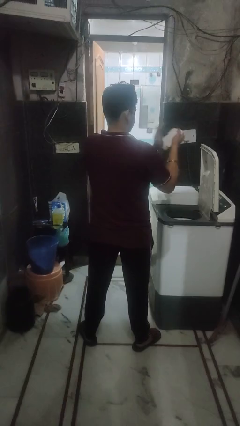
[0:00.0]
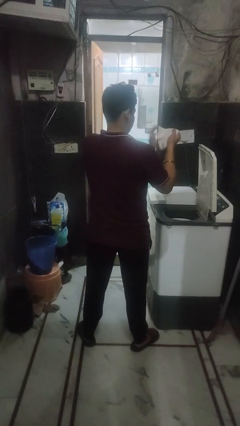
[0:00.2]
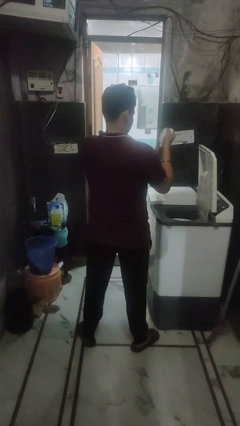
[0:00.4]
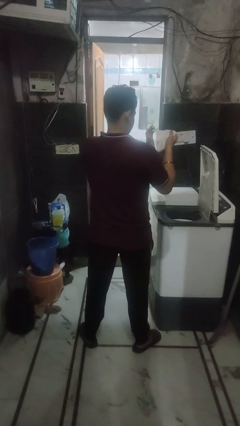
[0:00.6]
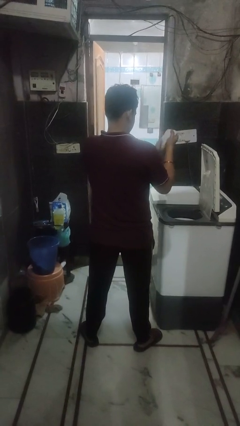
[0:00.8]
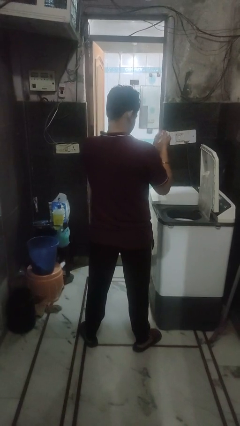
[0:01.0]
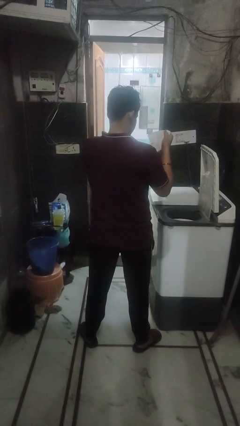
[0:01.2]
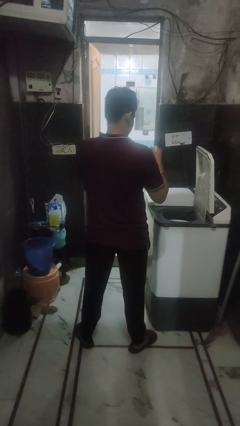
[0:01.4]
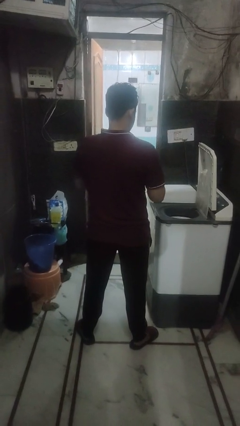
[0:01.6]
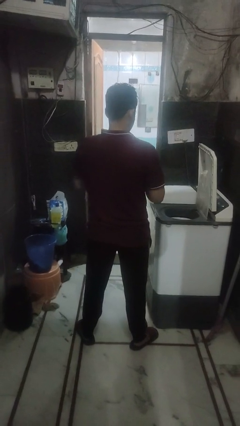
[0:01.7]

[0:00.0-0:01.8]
person cleans dryer lint trap

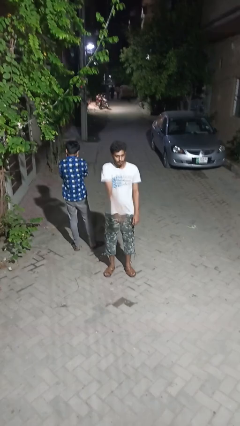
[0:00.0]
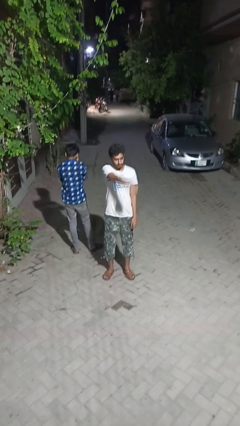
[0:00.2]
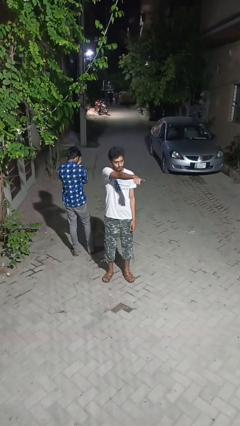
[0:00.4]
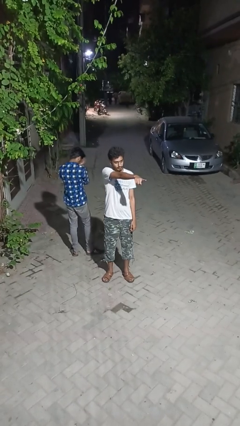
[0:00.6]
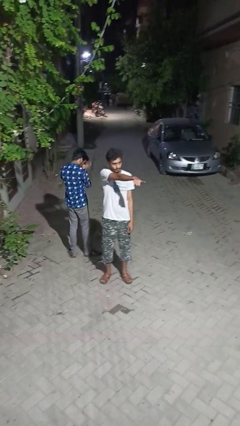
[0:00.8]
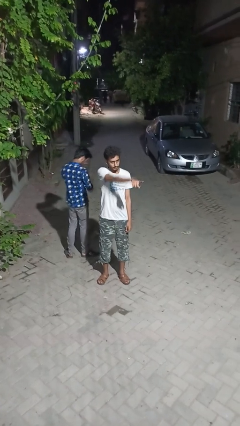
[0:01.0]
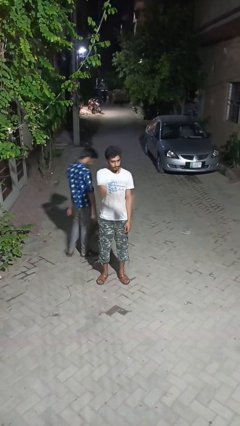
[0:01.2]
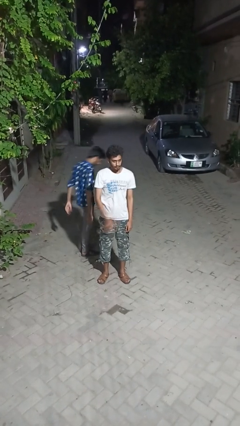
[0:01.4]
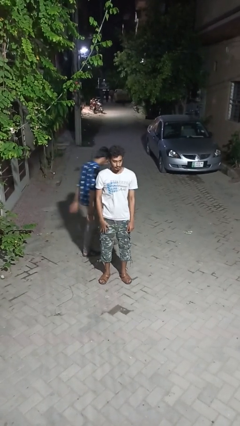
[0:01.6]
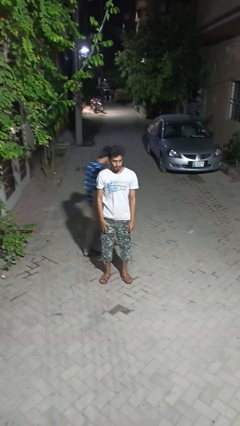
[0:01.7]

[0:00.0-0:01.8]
person points at person

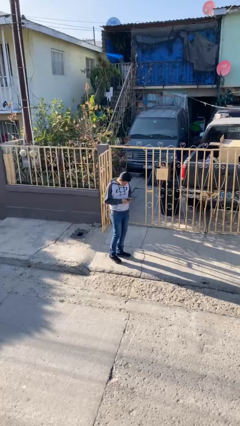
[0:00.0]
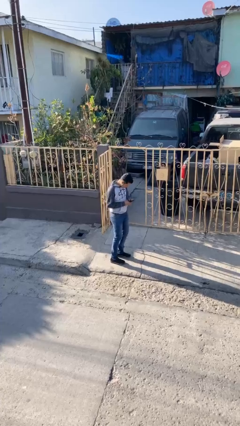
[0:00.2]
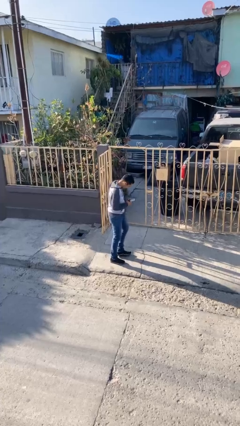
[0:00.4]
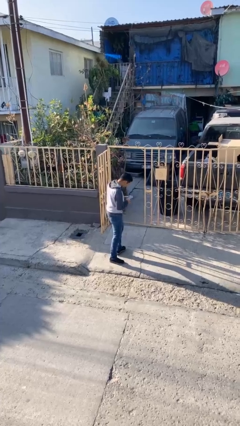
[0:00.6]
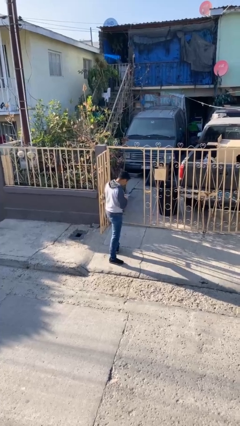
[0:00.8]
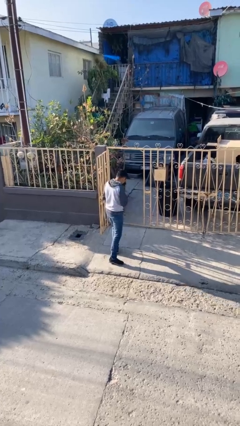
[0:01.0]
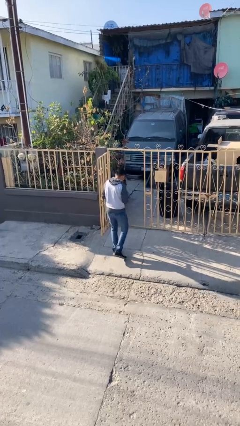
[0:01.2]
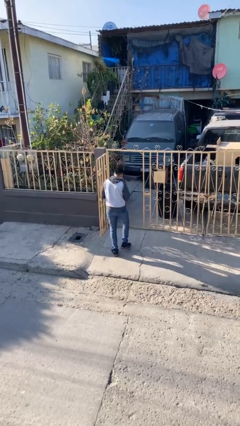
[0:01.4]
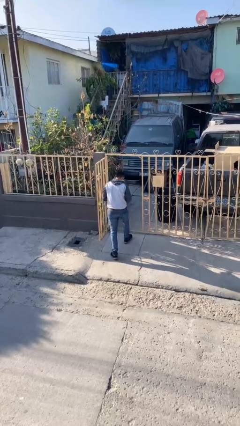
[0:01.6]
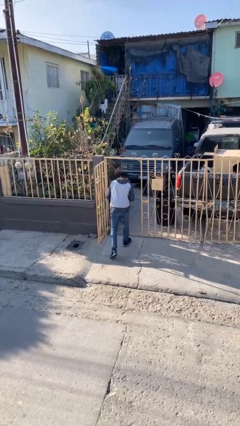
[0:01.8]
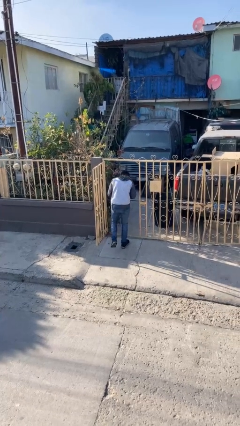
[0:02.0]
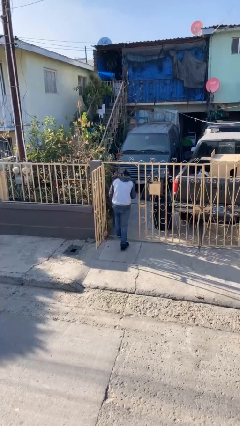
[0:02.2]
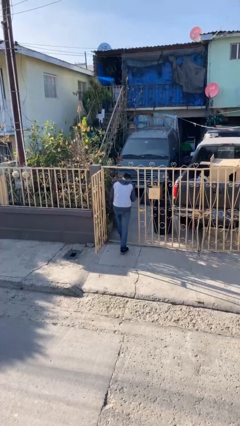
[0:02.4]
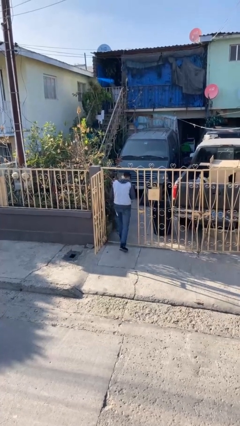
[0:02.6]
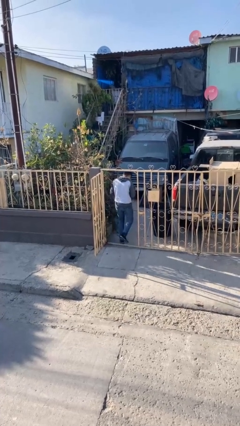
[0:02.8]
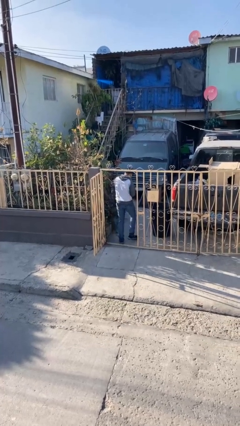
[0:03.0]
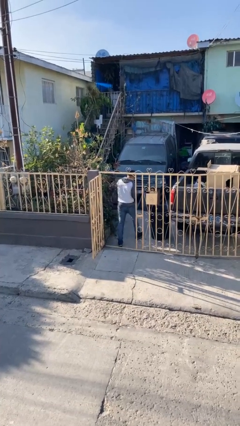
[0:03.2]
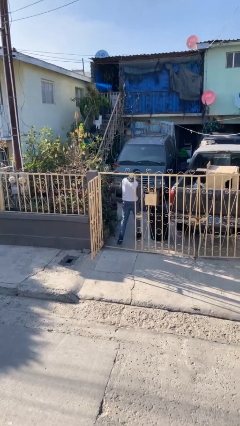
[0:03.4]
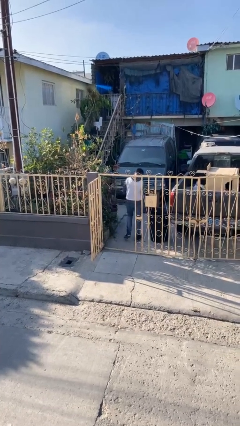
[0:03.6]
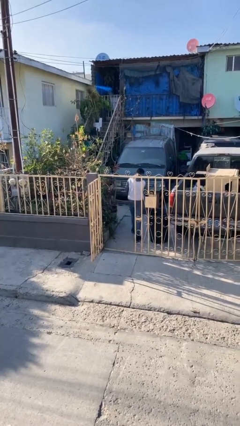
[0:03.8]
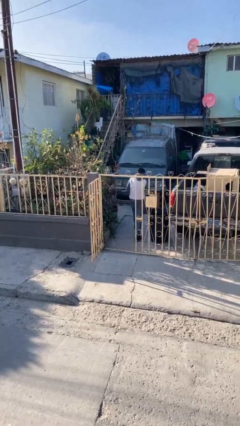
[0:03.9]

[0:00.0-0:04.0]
person exits scene through structure

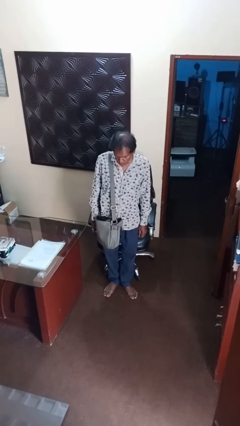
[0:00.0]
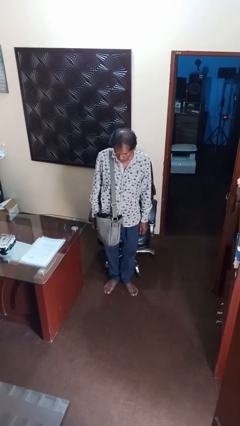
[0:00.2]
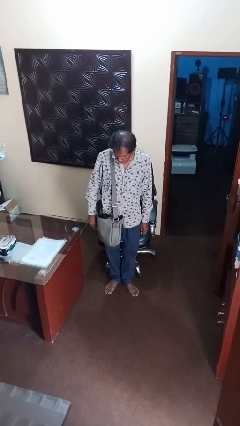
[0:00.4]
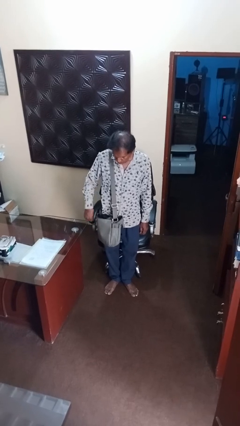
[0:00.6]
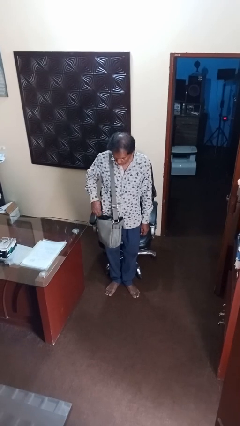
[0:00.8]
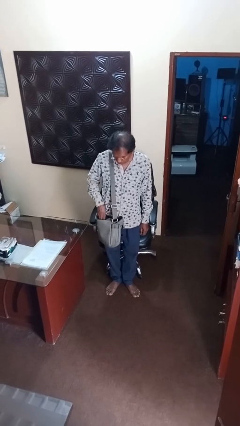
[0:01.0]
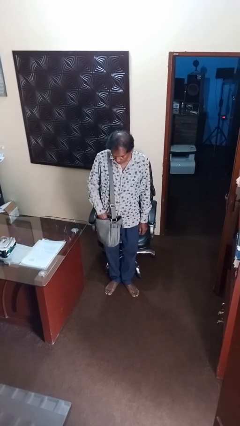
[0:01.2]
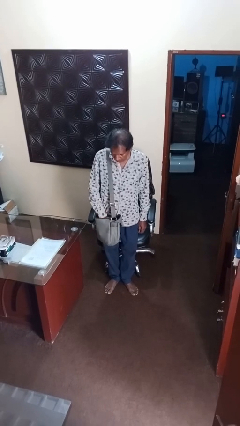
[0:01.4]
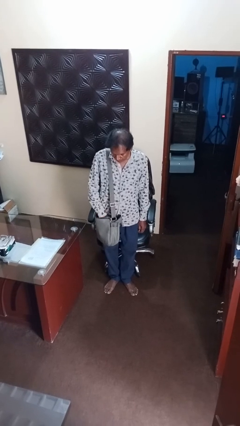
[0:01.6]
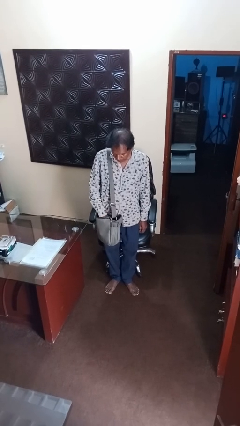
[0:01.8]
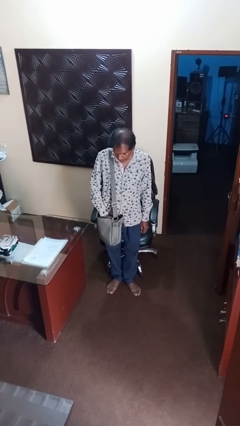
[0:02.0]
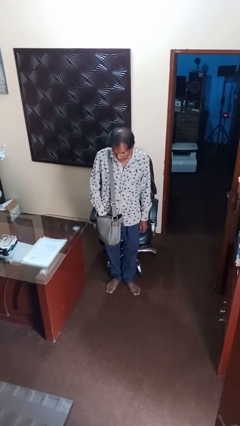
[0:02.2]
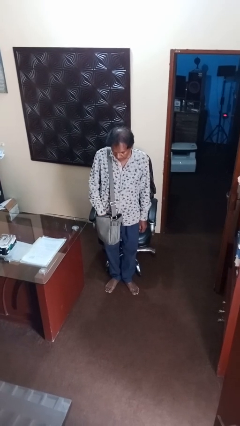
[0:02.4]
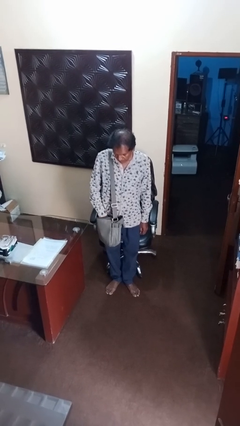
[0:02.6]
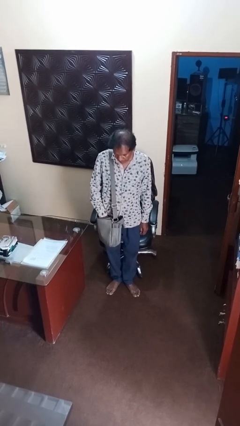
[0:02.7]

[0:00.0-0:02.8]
person searches in backpack

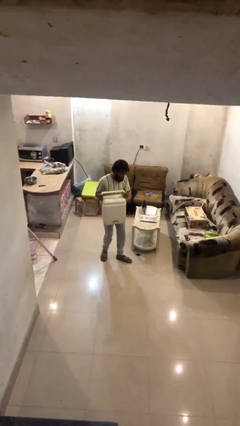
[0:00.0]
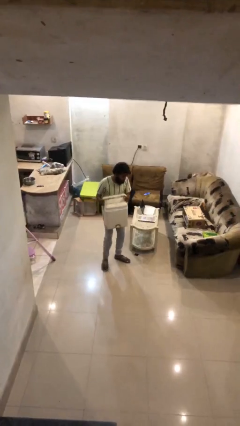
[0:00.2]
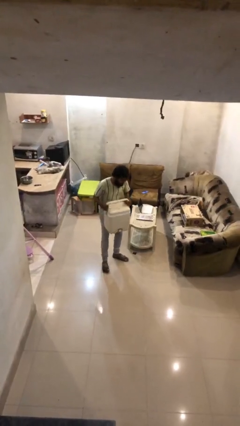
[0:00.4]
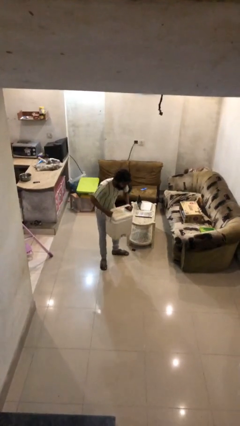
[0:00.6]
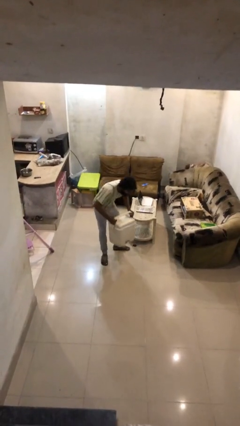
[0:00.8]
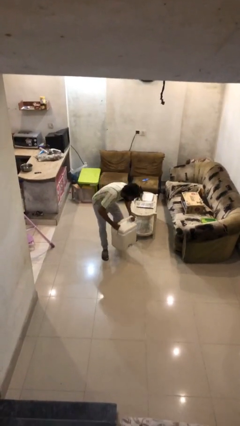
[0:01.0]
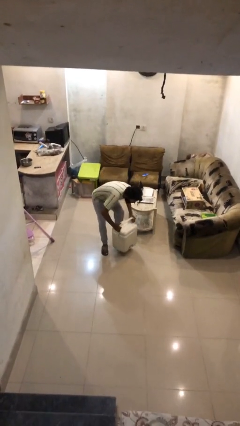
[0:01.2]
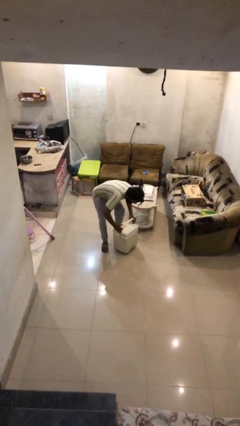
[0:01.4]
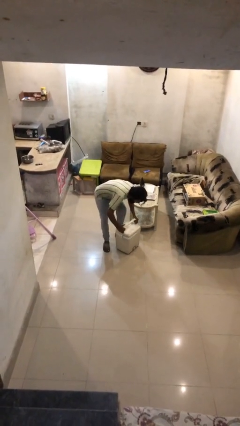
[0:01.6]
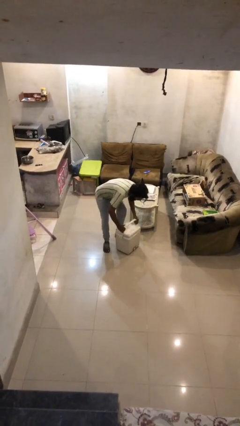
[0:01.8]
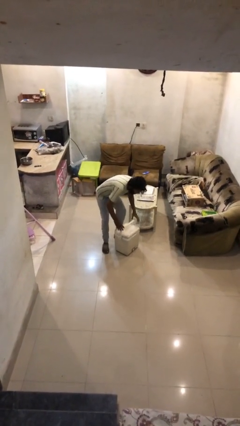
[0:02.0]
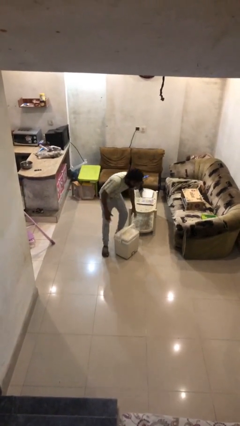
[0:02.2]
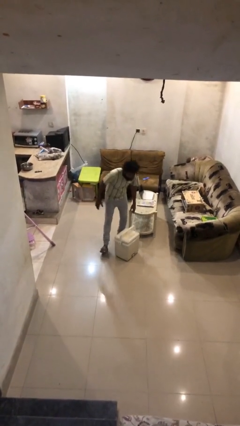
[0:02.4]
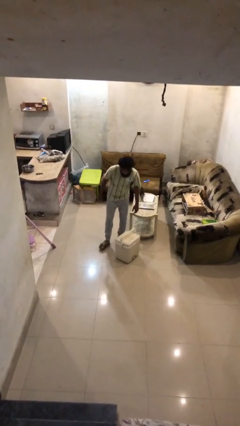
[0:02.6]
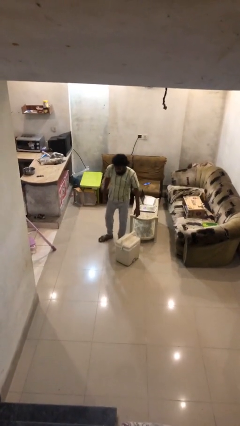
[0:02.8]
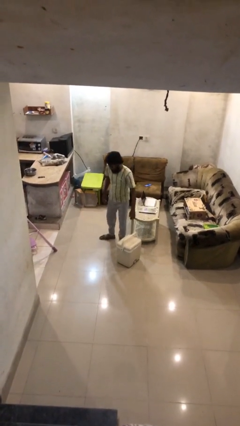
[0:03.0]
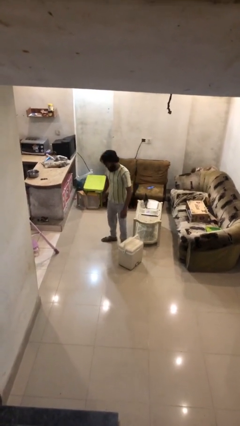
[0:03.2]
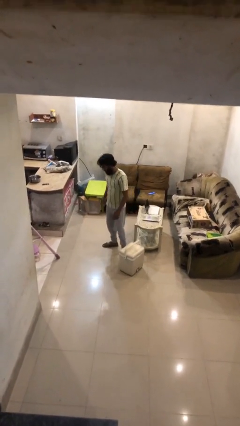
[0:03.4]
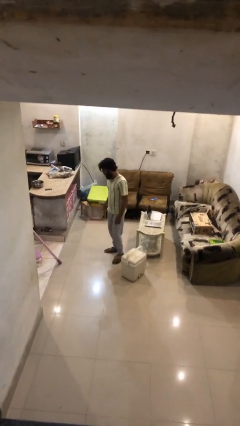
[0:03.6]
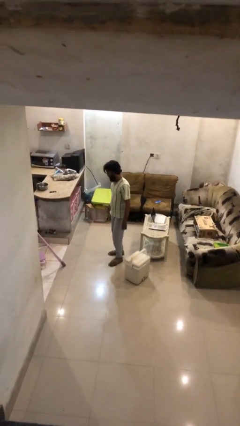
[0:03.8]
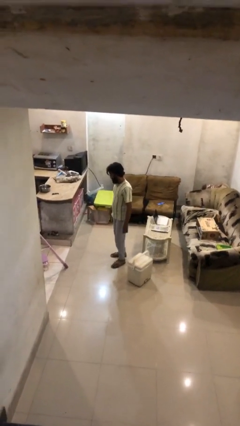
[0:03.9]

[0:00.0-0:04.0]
person puts down object on floor

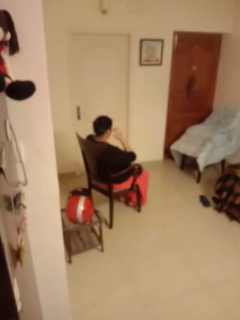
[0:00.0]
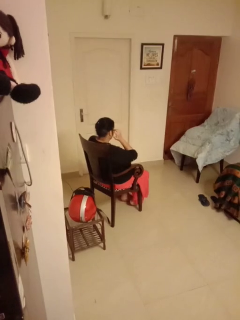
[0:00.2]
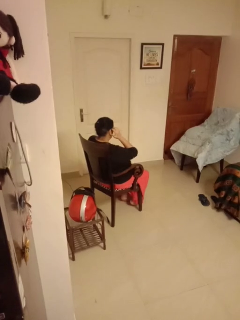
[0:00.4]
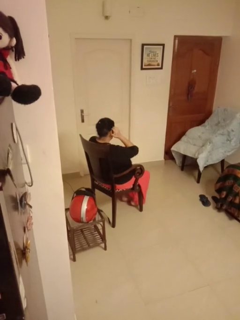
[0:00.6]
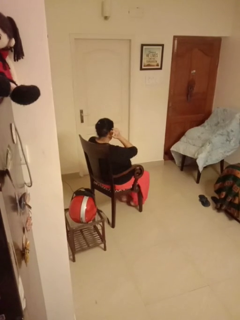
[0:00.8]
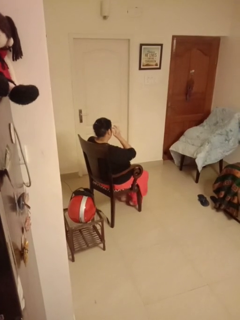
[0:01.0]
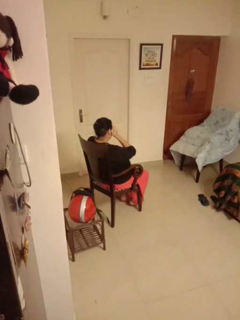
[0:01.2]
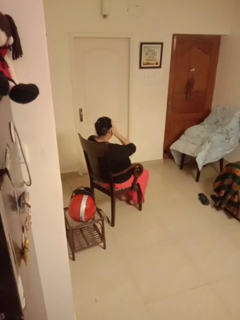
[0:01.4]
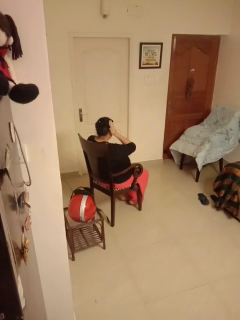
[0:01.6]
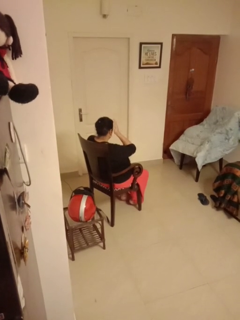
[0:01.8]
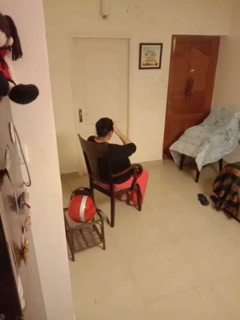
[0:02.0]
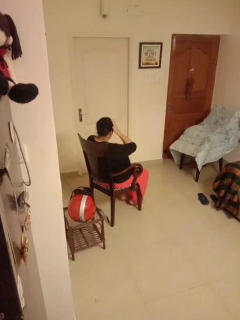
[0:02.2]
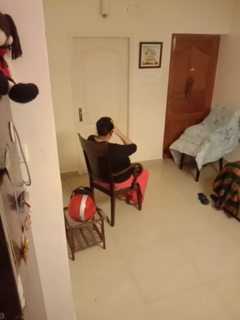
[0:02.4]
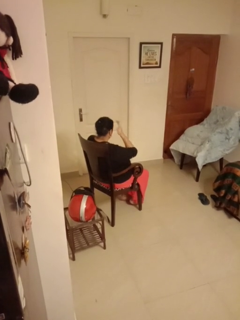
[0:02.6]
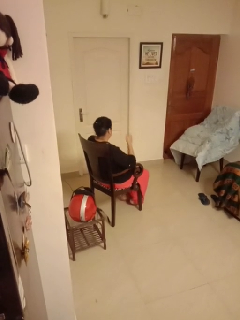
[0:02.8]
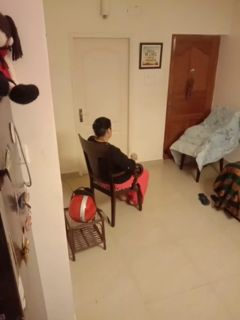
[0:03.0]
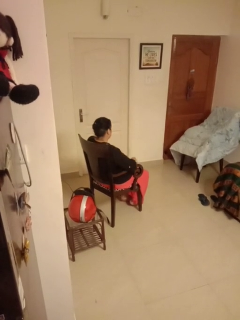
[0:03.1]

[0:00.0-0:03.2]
person strokes hair

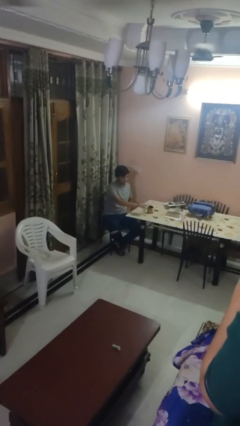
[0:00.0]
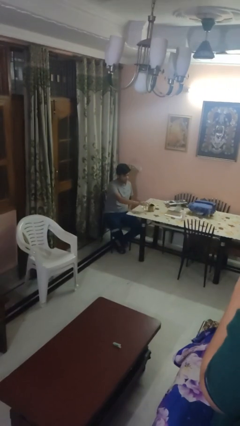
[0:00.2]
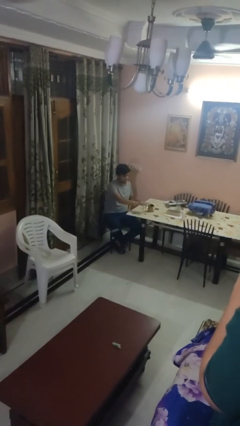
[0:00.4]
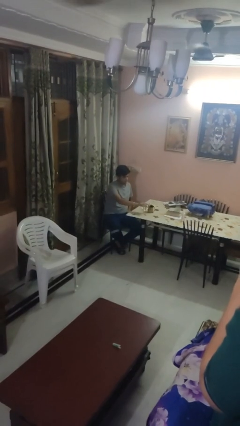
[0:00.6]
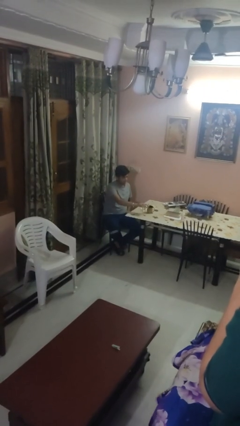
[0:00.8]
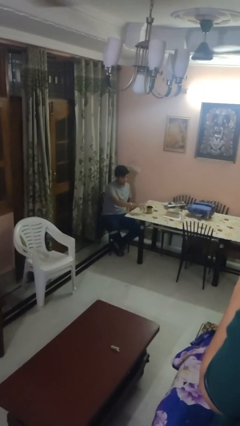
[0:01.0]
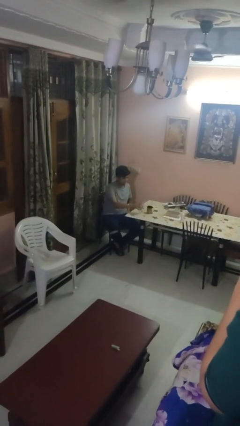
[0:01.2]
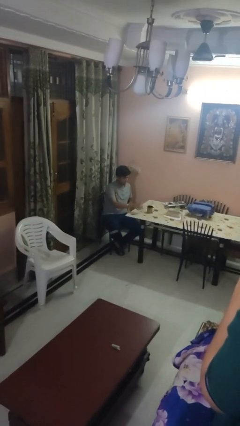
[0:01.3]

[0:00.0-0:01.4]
person pours liquid into cup
